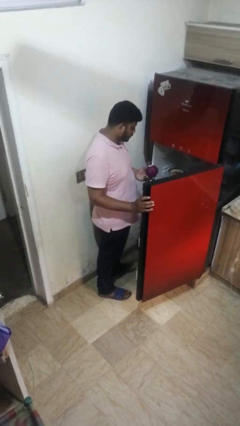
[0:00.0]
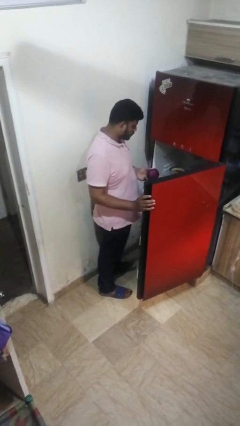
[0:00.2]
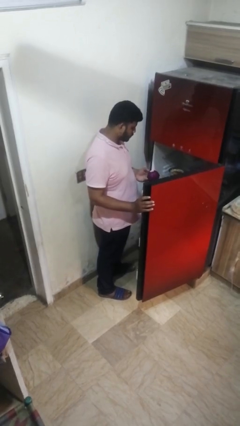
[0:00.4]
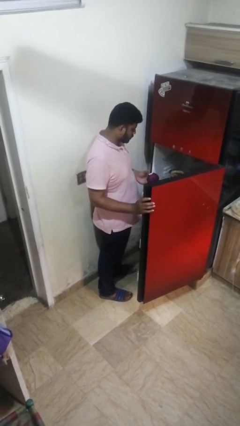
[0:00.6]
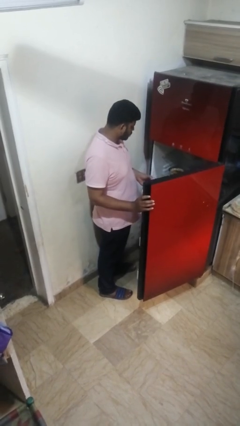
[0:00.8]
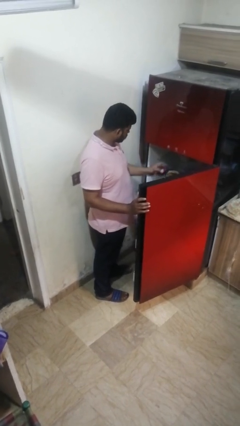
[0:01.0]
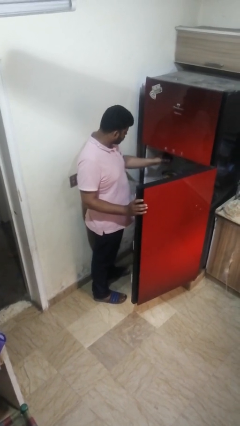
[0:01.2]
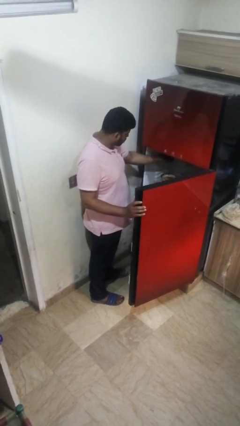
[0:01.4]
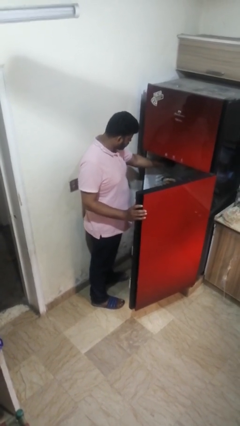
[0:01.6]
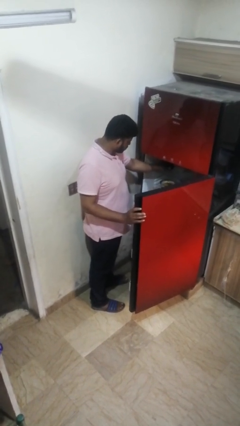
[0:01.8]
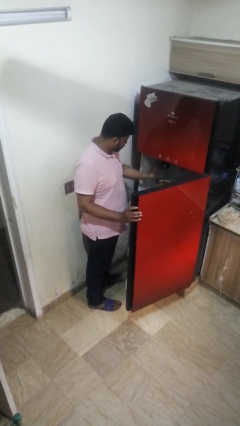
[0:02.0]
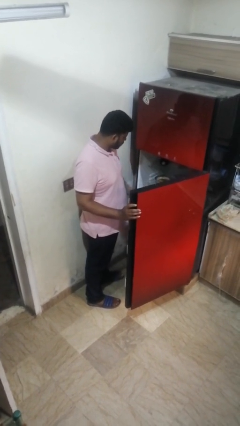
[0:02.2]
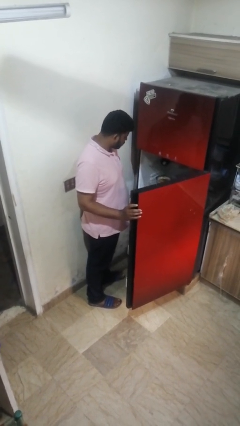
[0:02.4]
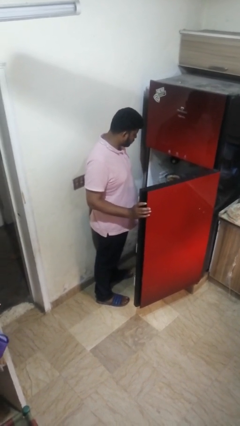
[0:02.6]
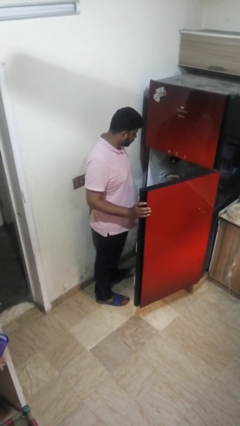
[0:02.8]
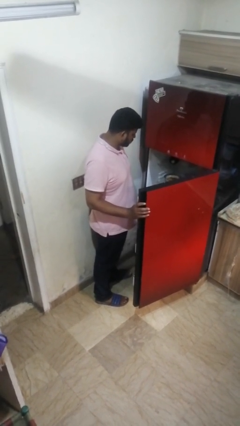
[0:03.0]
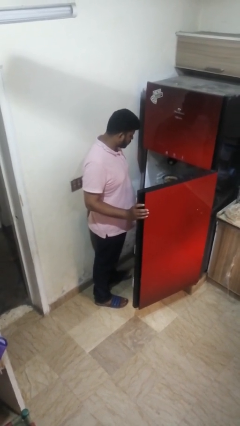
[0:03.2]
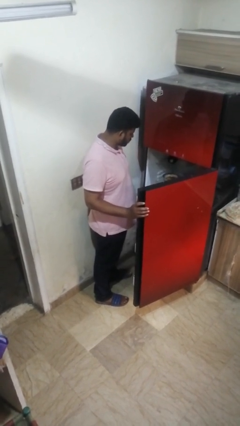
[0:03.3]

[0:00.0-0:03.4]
person puts object into refrigerator

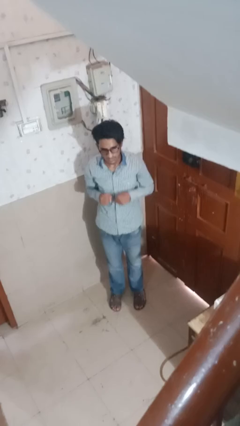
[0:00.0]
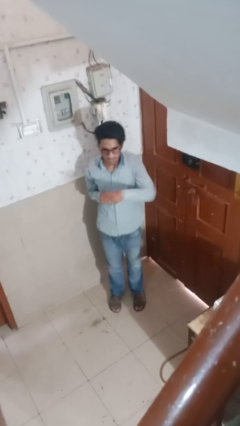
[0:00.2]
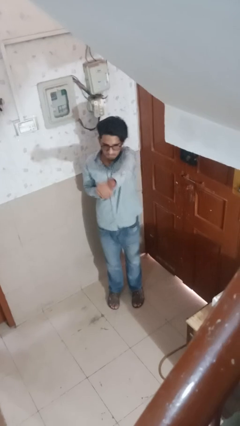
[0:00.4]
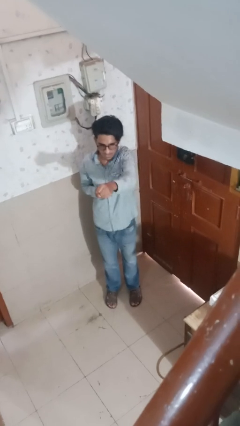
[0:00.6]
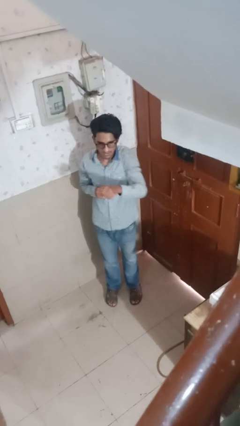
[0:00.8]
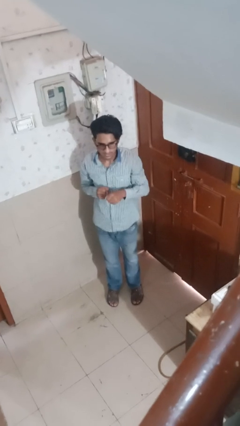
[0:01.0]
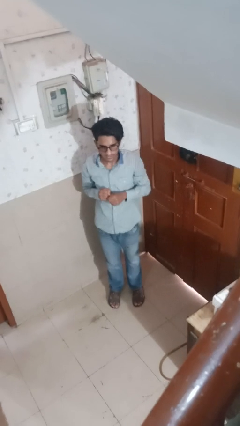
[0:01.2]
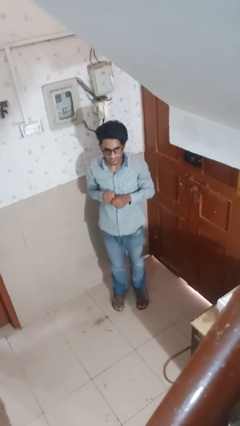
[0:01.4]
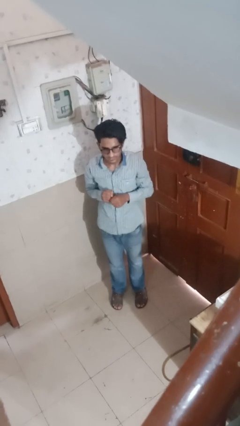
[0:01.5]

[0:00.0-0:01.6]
person punches

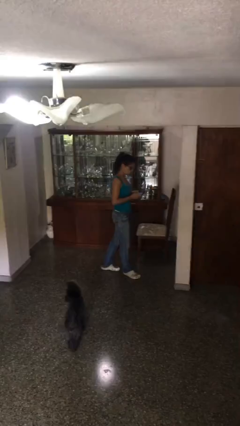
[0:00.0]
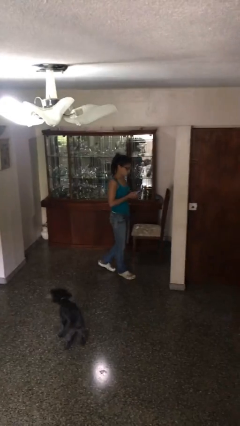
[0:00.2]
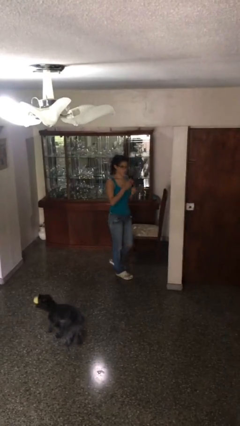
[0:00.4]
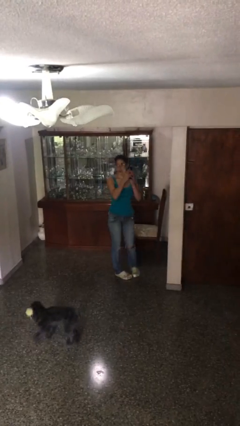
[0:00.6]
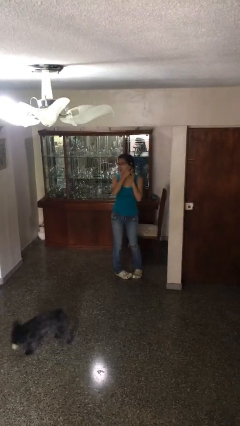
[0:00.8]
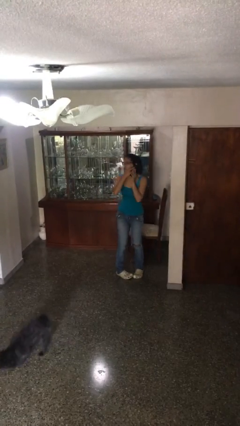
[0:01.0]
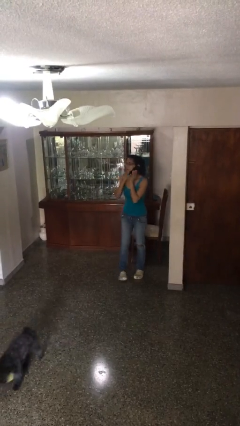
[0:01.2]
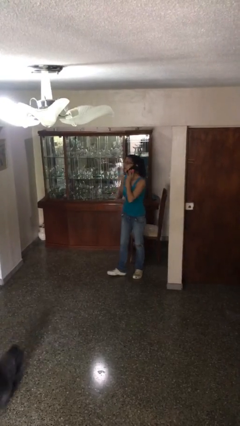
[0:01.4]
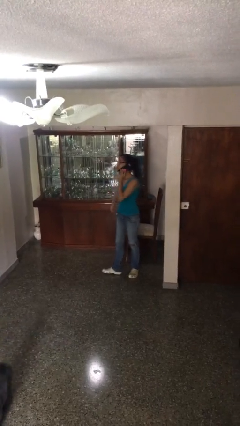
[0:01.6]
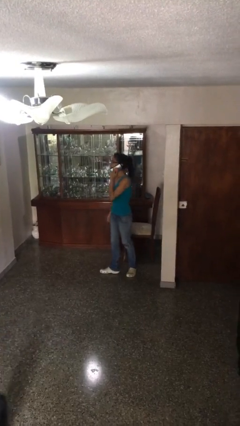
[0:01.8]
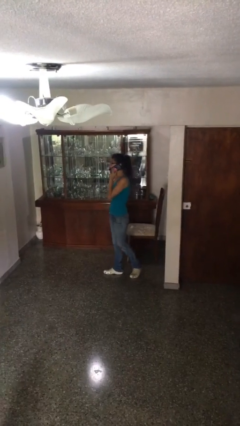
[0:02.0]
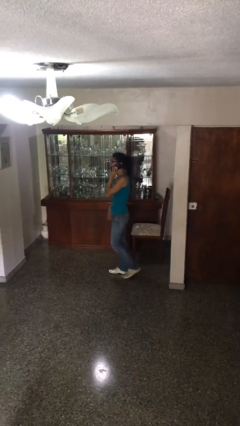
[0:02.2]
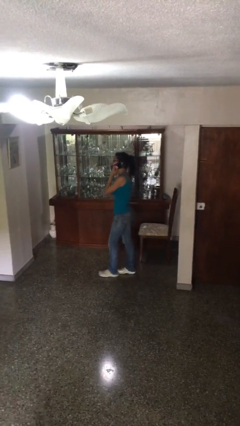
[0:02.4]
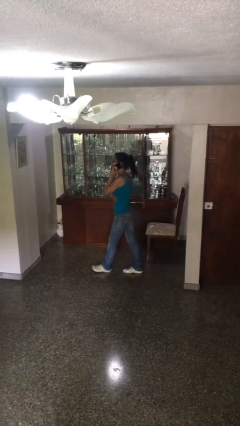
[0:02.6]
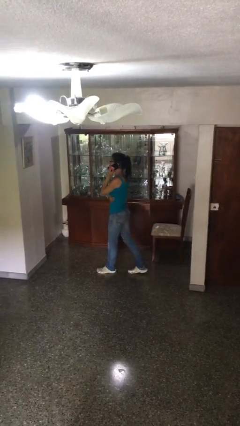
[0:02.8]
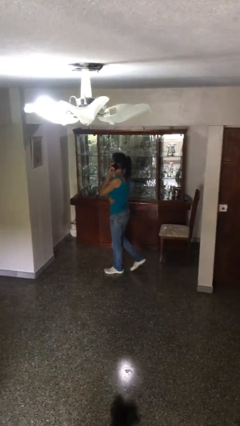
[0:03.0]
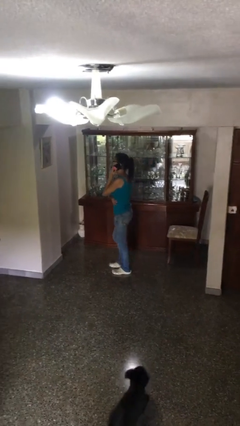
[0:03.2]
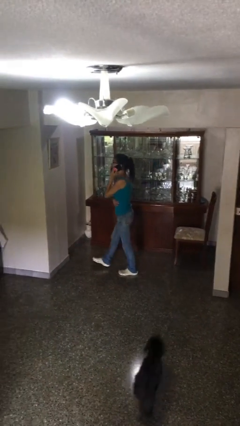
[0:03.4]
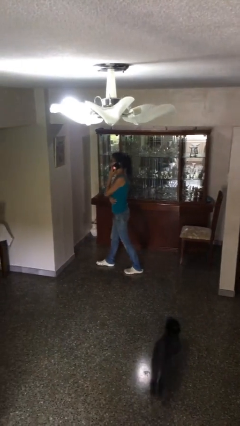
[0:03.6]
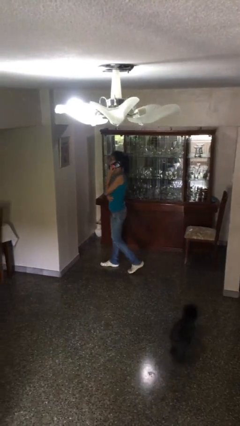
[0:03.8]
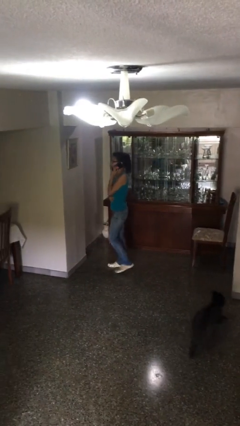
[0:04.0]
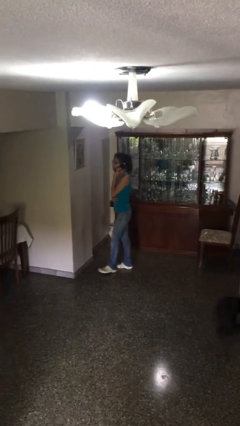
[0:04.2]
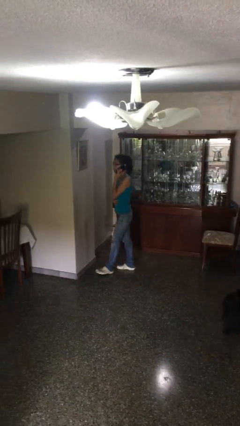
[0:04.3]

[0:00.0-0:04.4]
person talks on phone

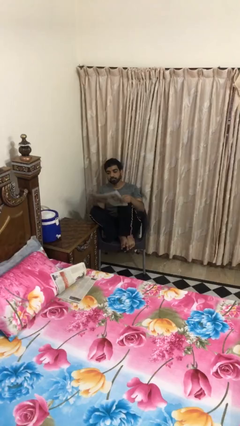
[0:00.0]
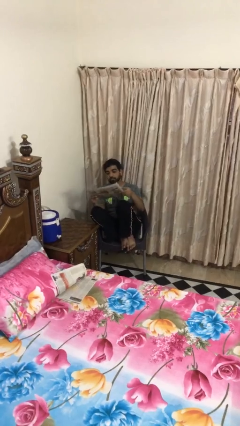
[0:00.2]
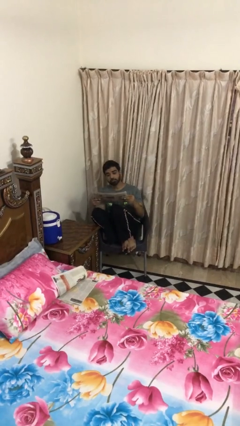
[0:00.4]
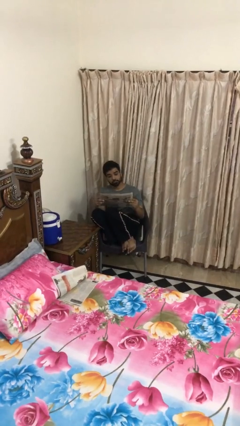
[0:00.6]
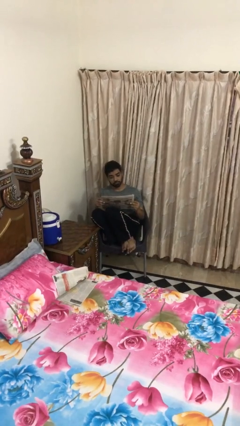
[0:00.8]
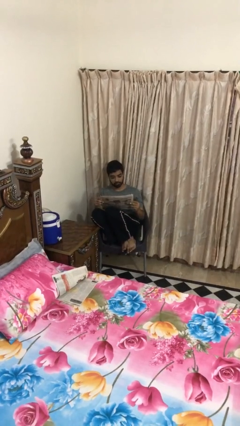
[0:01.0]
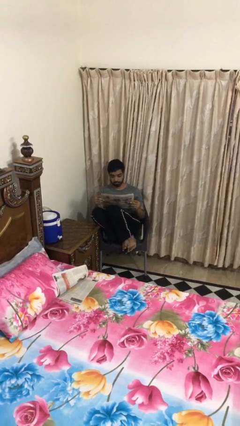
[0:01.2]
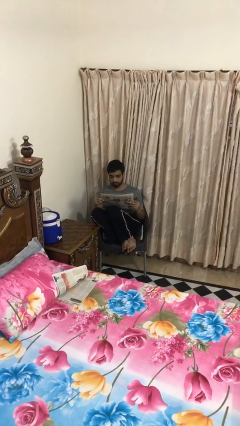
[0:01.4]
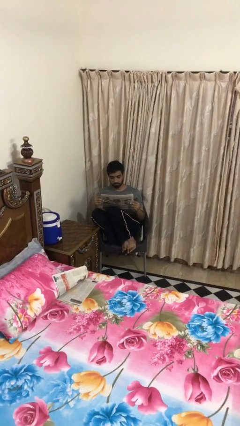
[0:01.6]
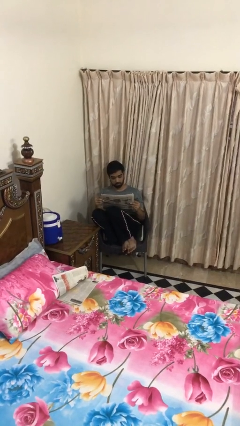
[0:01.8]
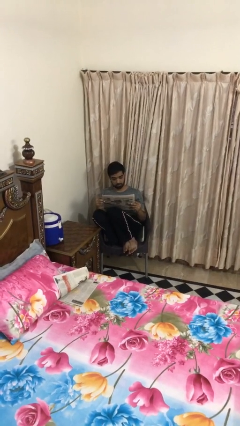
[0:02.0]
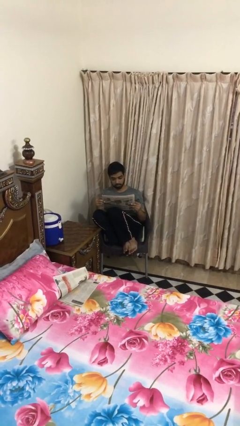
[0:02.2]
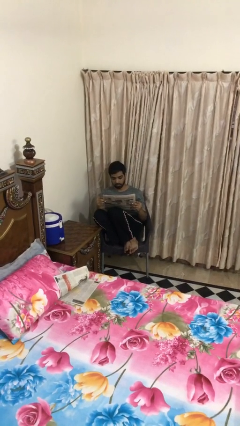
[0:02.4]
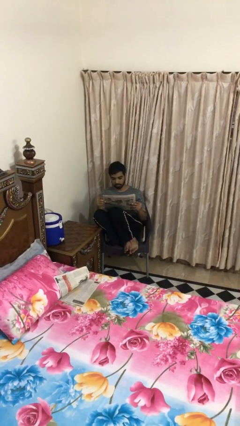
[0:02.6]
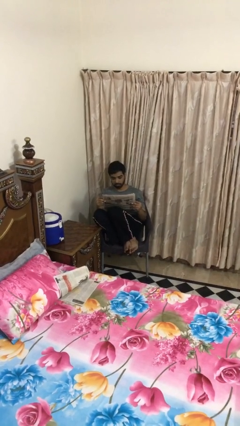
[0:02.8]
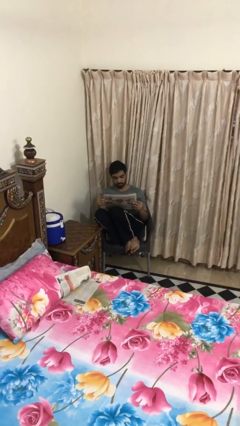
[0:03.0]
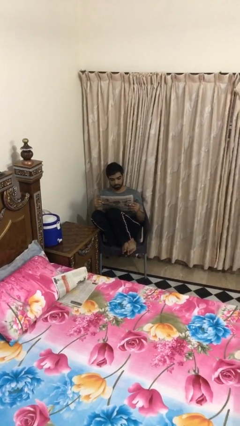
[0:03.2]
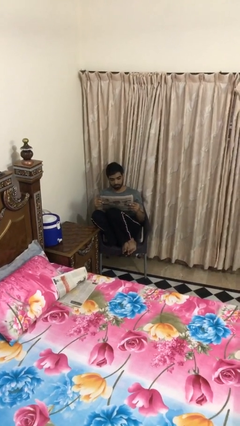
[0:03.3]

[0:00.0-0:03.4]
person reads document

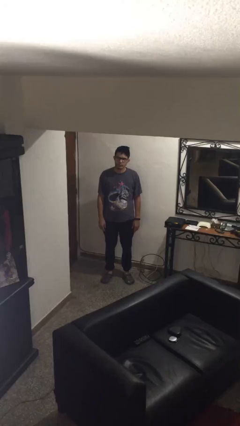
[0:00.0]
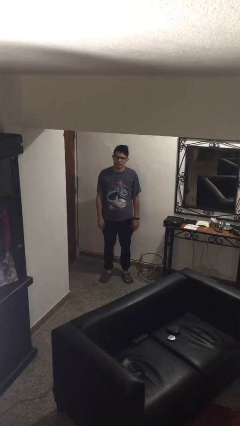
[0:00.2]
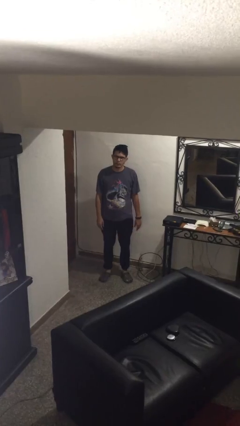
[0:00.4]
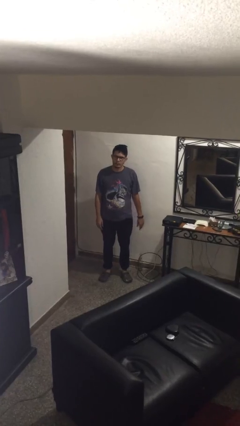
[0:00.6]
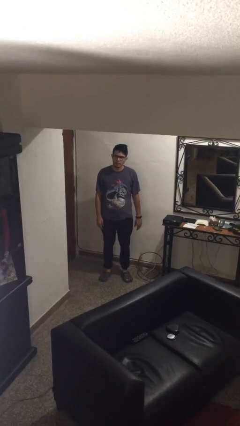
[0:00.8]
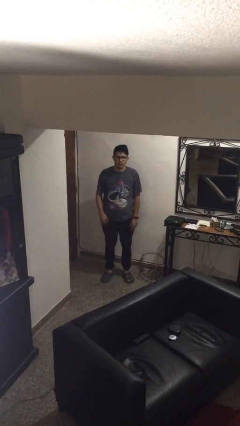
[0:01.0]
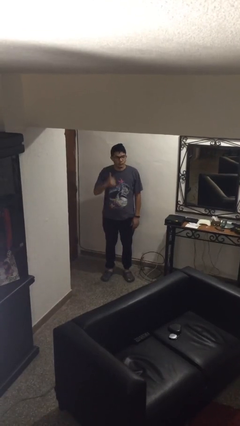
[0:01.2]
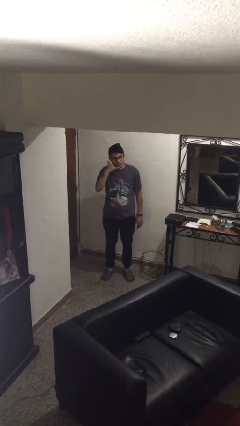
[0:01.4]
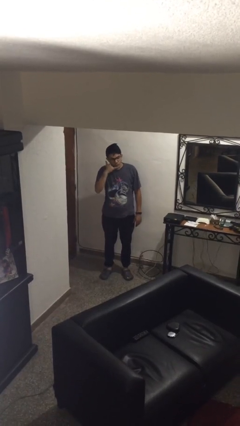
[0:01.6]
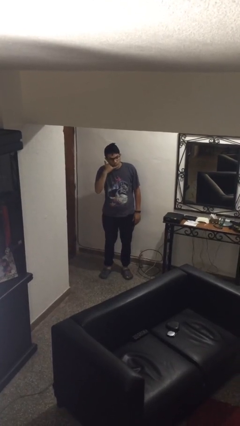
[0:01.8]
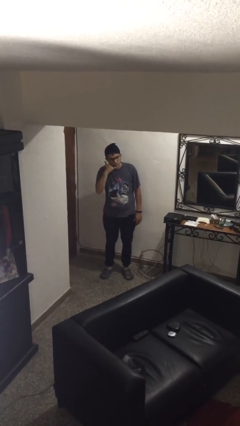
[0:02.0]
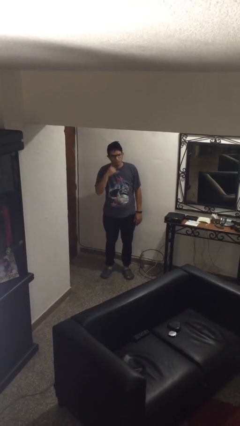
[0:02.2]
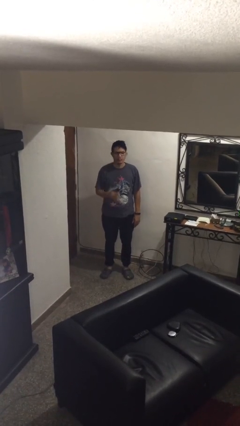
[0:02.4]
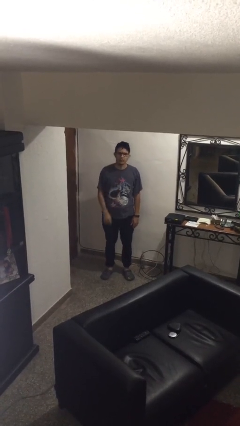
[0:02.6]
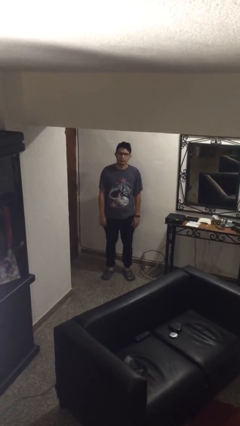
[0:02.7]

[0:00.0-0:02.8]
person gestures call me

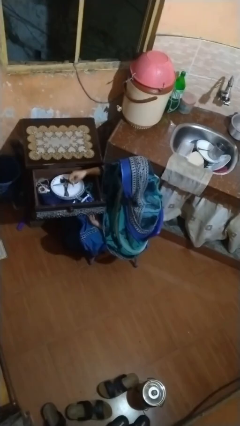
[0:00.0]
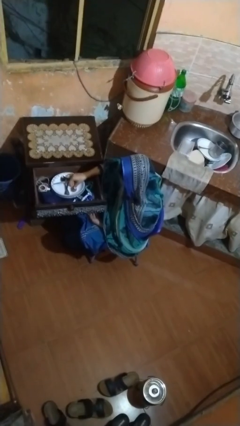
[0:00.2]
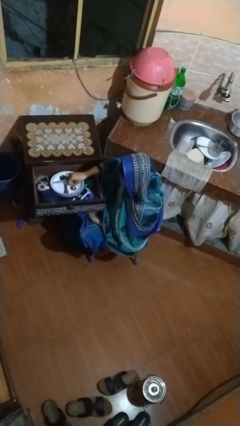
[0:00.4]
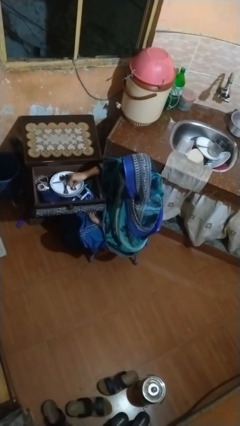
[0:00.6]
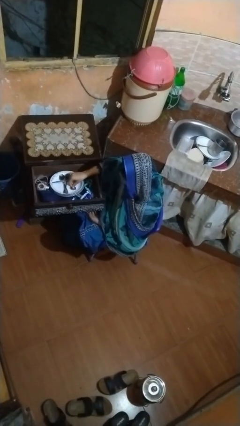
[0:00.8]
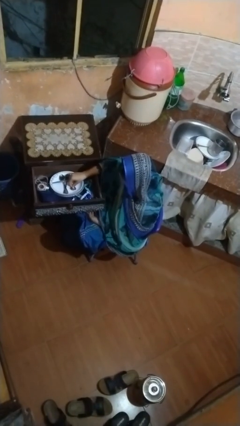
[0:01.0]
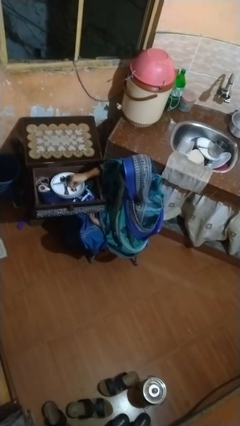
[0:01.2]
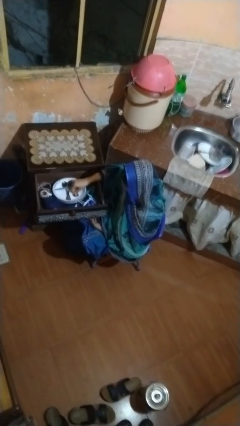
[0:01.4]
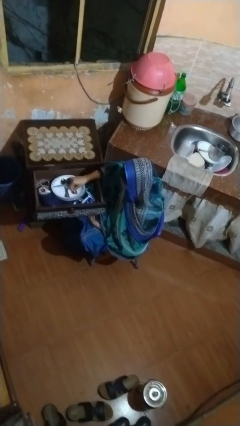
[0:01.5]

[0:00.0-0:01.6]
person puts object into kitchen drawer
